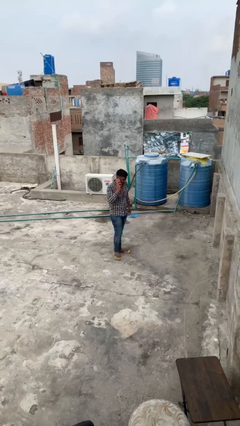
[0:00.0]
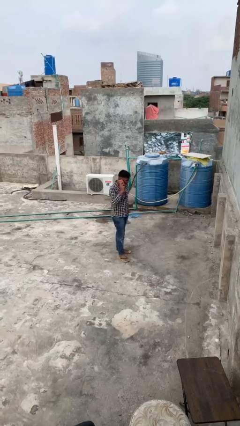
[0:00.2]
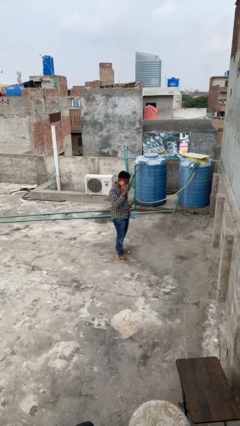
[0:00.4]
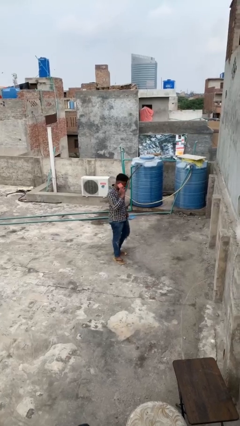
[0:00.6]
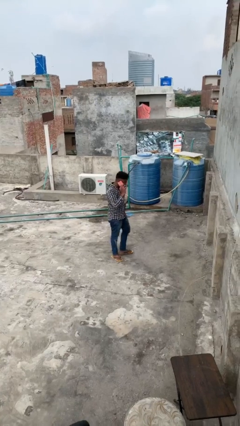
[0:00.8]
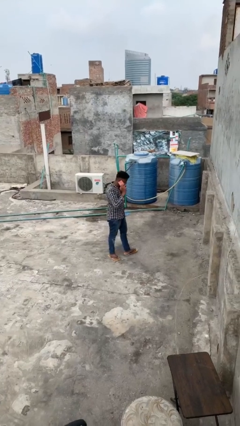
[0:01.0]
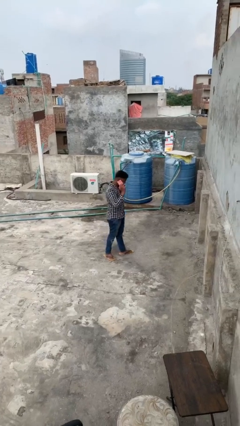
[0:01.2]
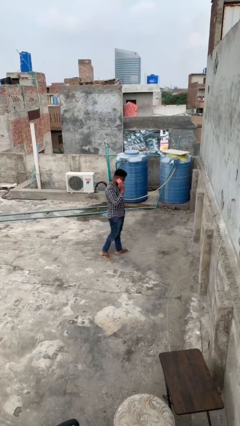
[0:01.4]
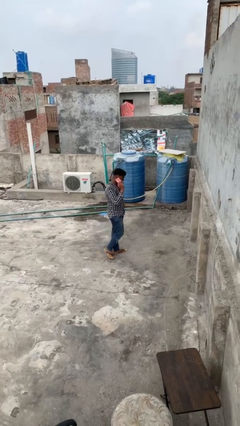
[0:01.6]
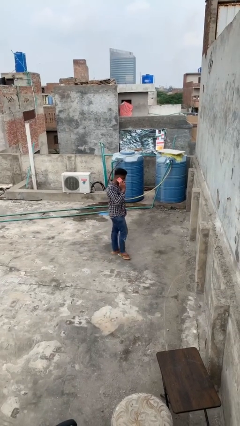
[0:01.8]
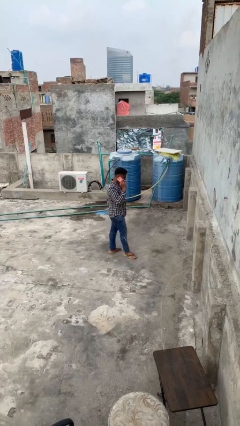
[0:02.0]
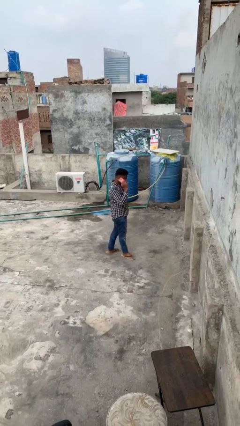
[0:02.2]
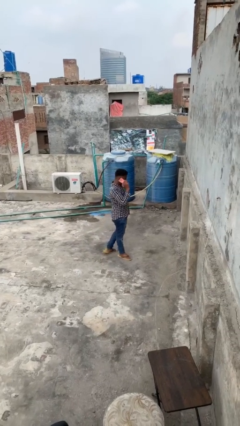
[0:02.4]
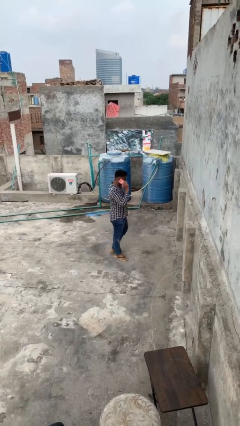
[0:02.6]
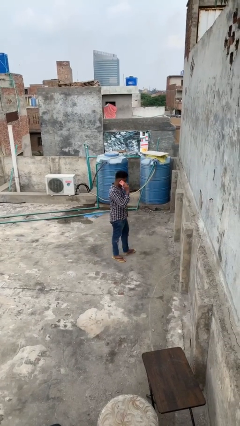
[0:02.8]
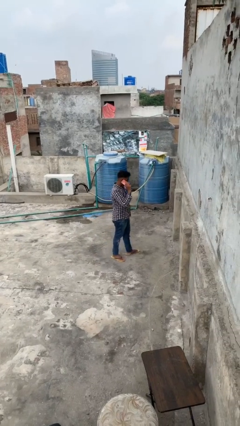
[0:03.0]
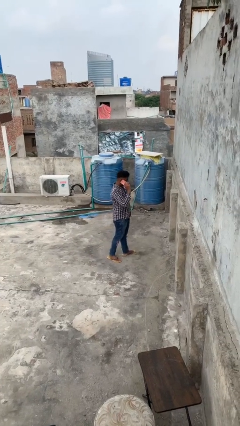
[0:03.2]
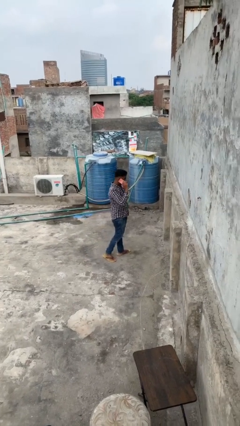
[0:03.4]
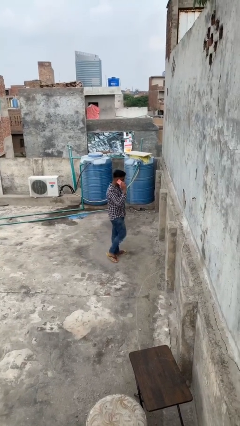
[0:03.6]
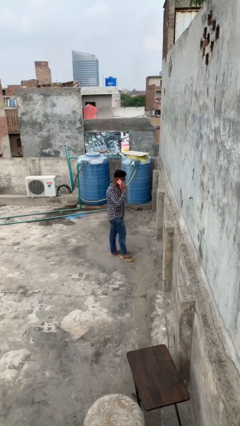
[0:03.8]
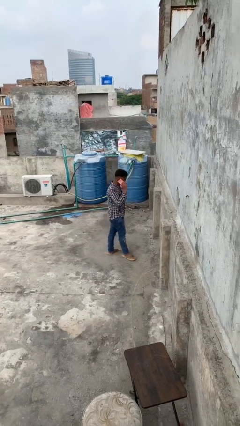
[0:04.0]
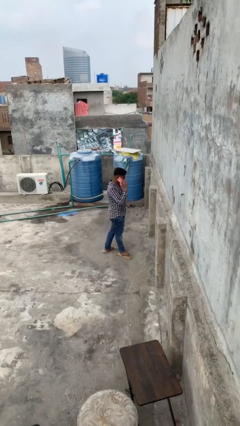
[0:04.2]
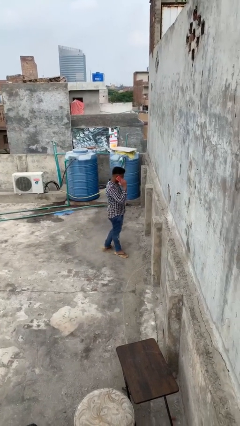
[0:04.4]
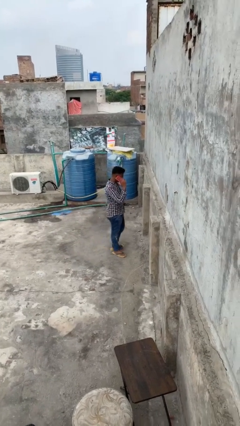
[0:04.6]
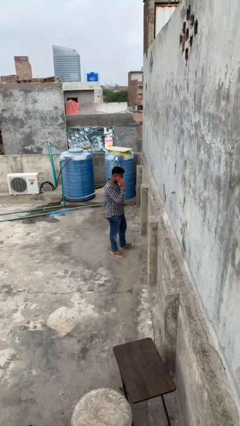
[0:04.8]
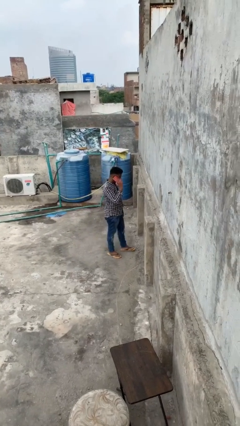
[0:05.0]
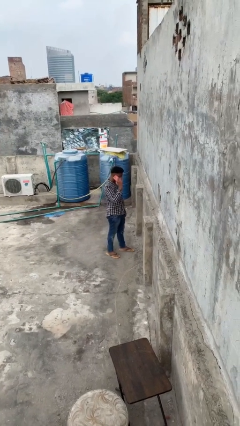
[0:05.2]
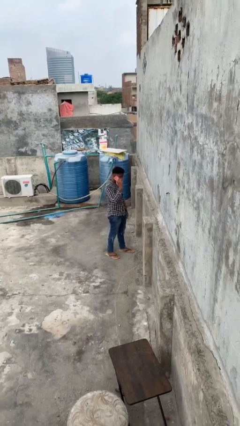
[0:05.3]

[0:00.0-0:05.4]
person talks on phone

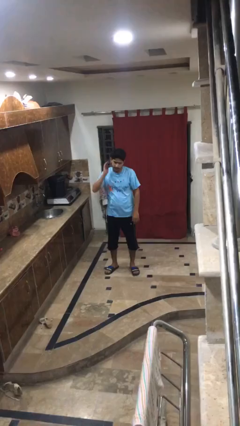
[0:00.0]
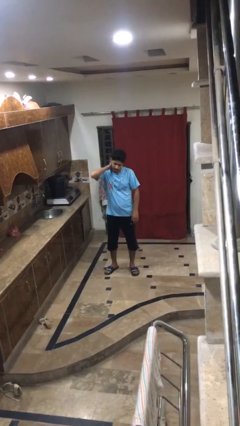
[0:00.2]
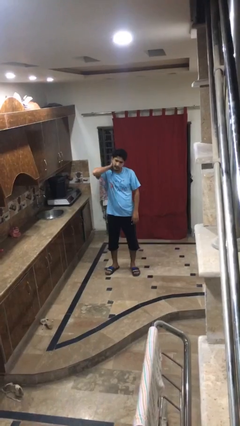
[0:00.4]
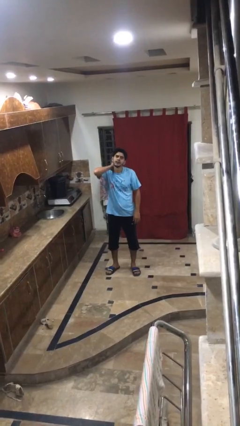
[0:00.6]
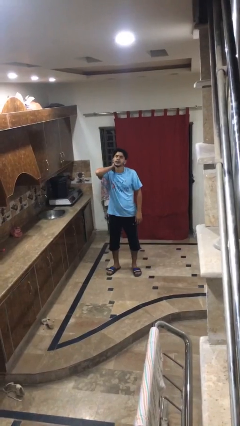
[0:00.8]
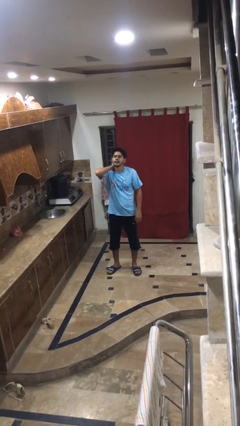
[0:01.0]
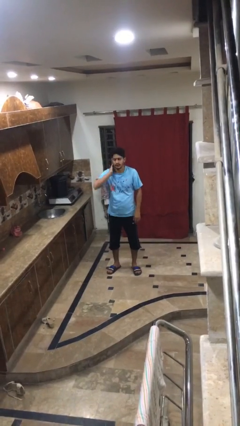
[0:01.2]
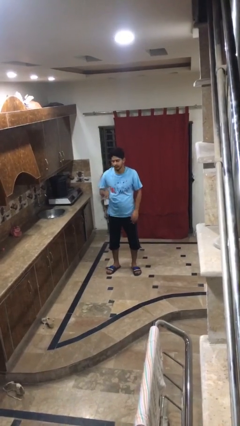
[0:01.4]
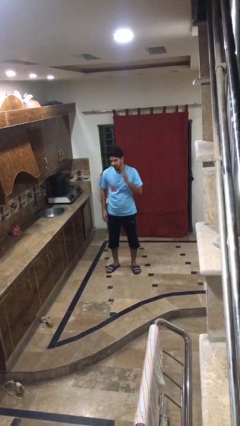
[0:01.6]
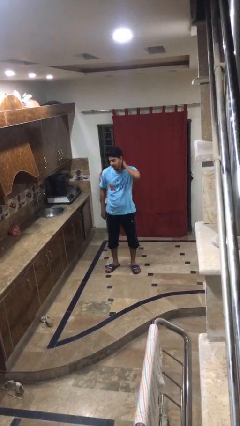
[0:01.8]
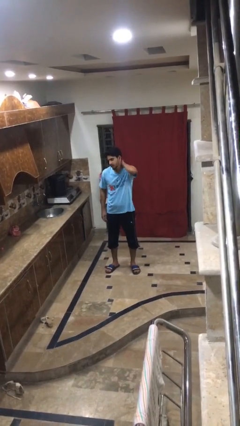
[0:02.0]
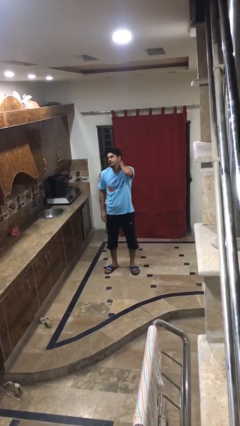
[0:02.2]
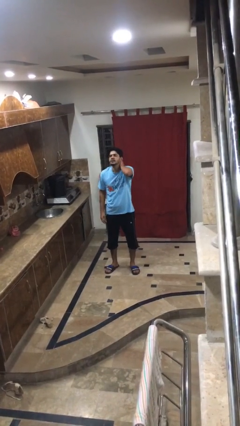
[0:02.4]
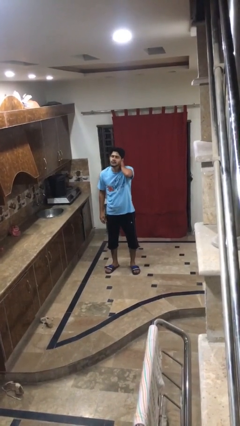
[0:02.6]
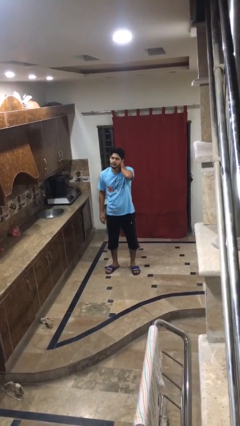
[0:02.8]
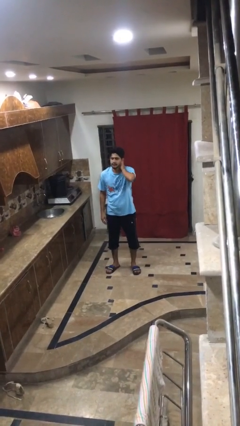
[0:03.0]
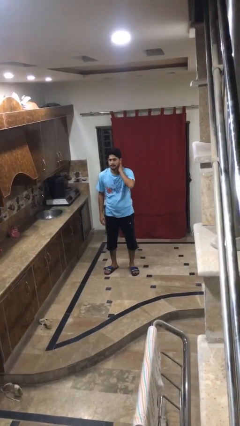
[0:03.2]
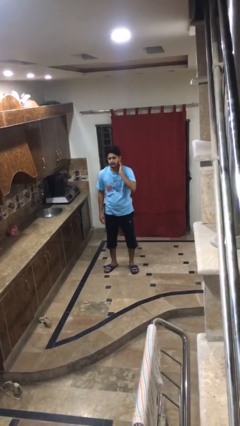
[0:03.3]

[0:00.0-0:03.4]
person rubs neck

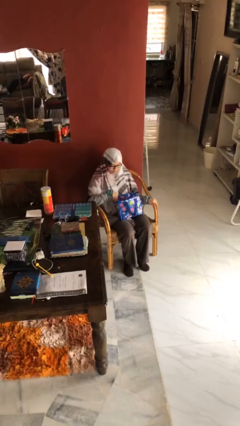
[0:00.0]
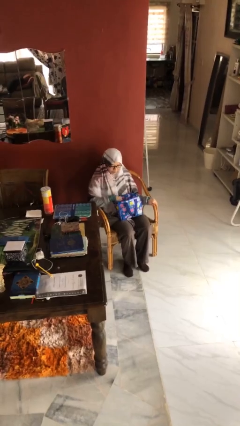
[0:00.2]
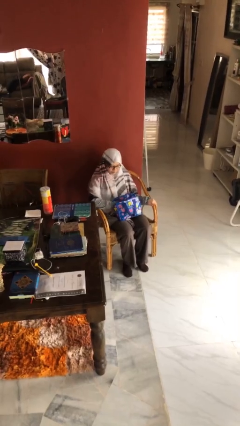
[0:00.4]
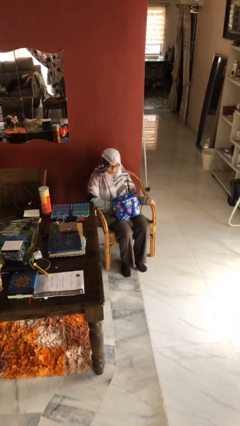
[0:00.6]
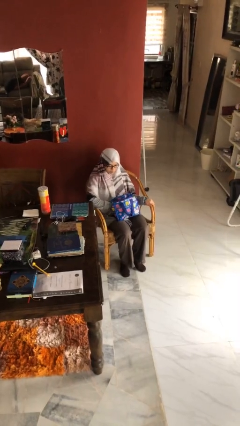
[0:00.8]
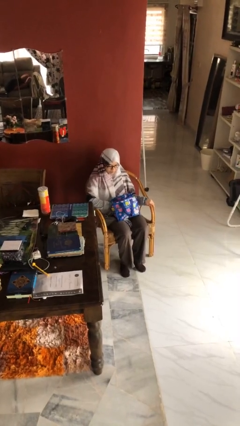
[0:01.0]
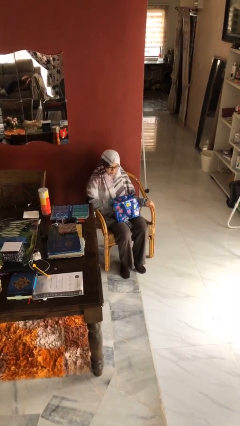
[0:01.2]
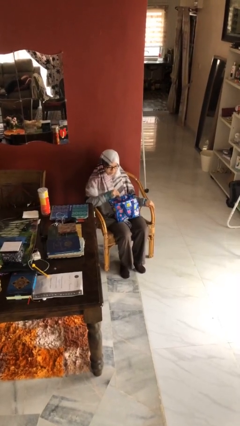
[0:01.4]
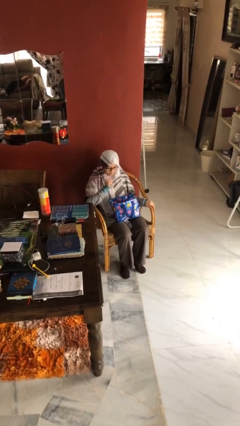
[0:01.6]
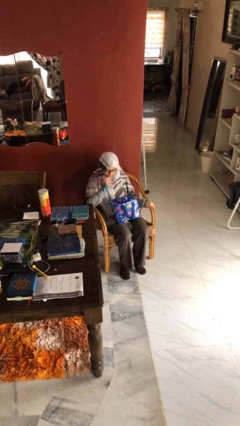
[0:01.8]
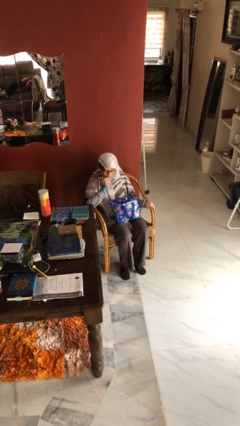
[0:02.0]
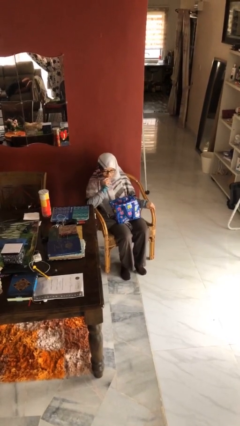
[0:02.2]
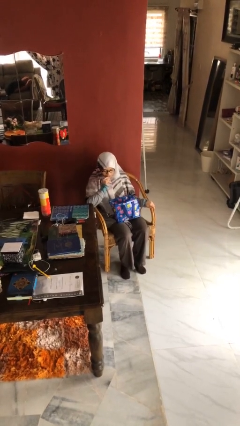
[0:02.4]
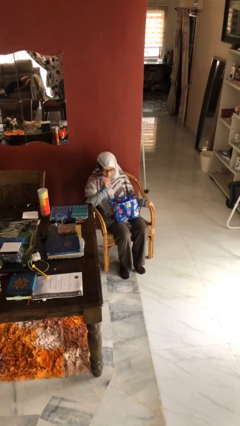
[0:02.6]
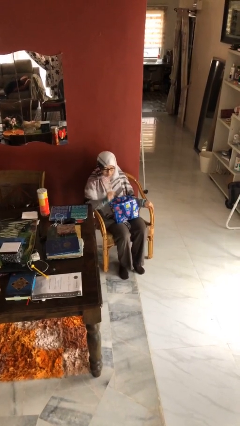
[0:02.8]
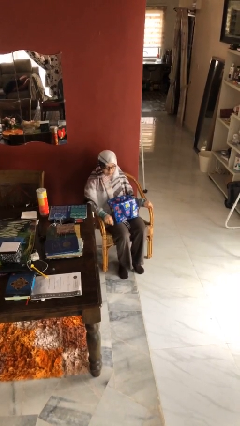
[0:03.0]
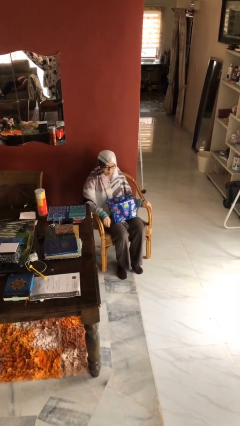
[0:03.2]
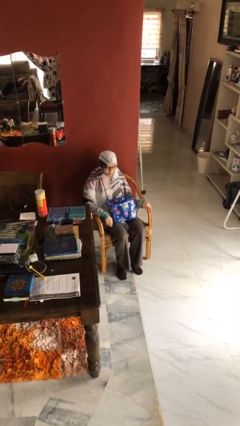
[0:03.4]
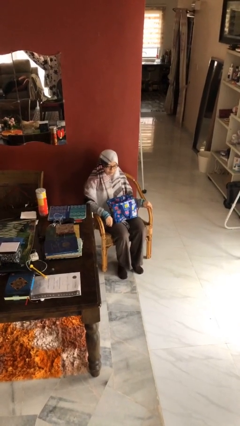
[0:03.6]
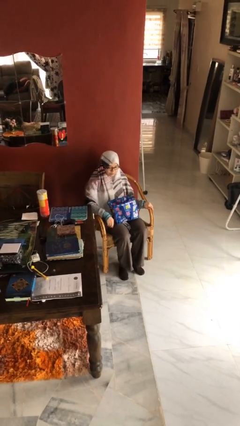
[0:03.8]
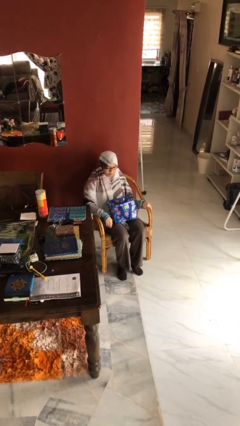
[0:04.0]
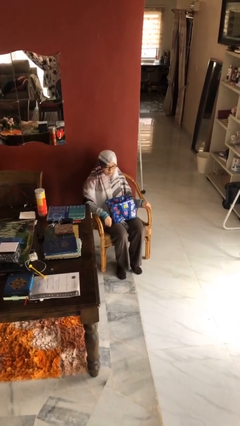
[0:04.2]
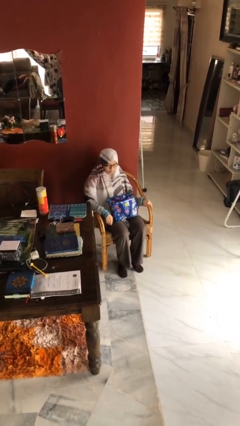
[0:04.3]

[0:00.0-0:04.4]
person eats snack from bag

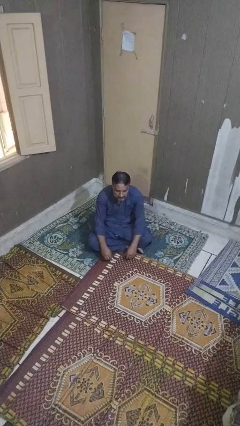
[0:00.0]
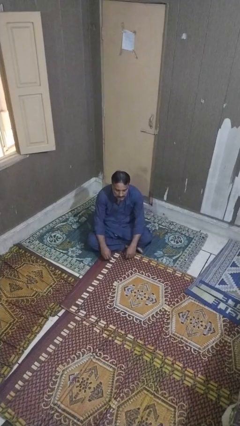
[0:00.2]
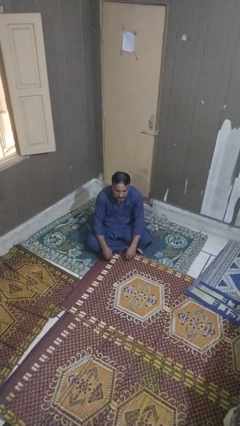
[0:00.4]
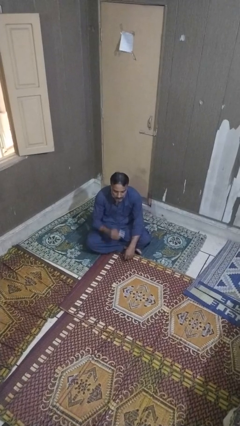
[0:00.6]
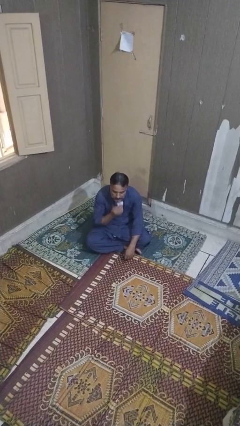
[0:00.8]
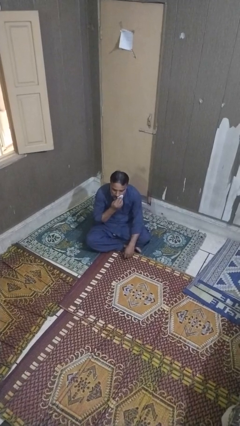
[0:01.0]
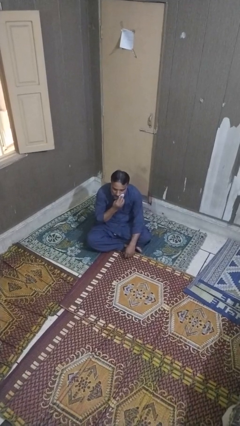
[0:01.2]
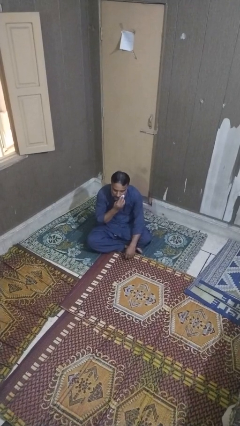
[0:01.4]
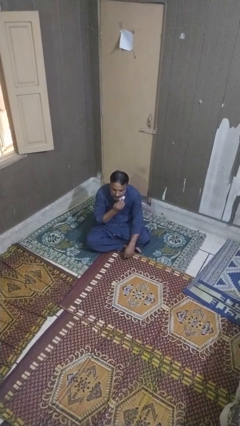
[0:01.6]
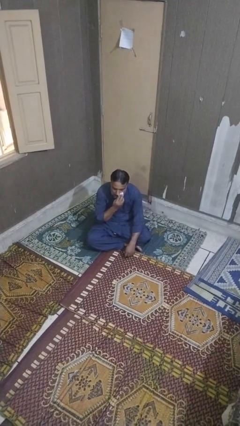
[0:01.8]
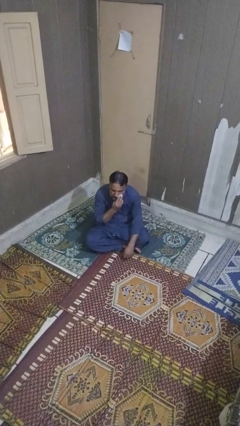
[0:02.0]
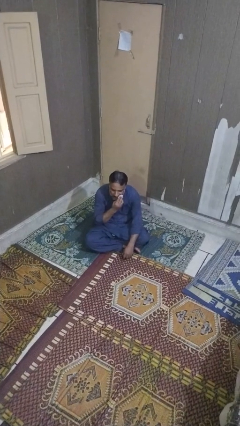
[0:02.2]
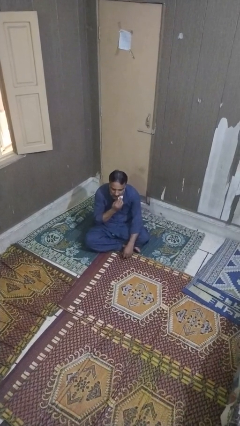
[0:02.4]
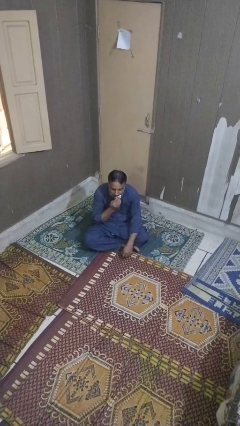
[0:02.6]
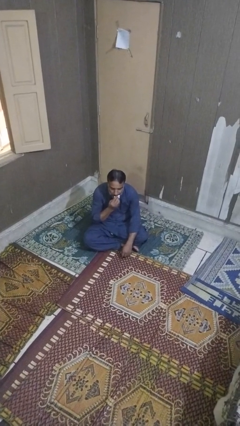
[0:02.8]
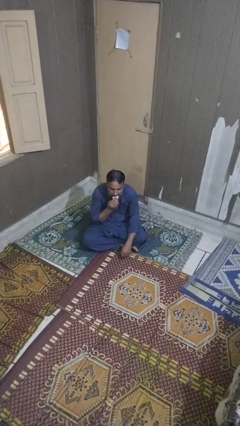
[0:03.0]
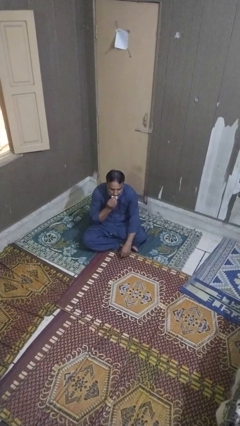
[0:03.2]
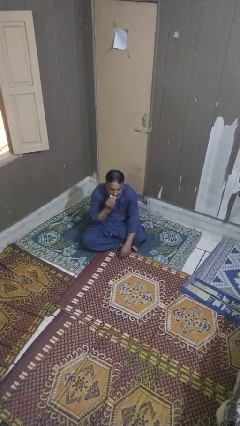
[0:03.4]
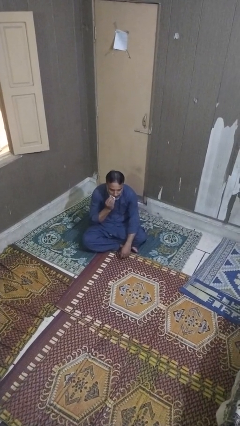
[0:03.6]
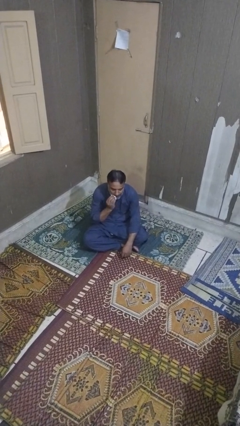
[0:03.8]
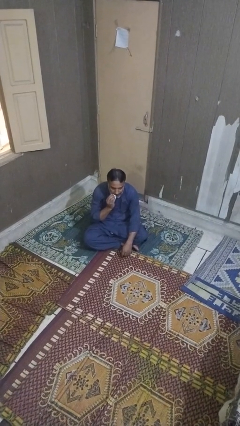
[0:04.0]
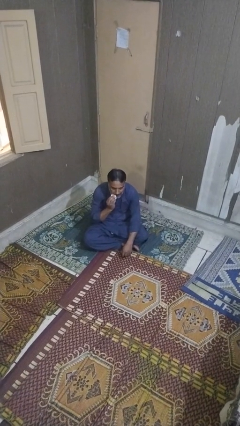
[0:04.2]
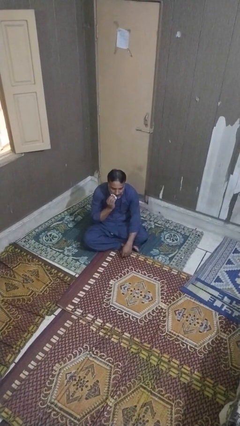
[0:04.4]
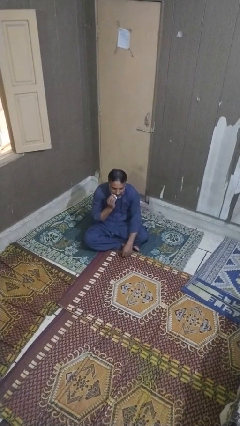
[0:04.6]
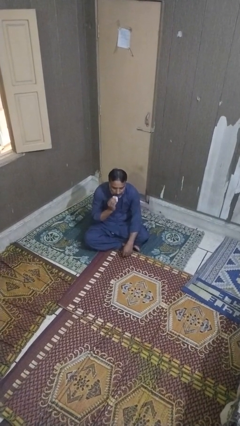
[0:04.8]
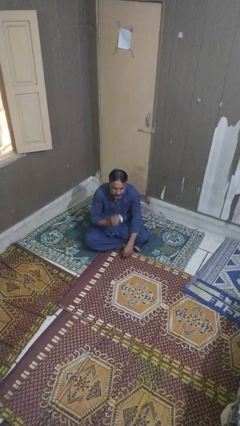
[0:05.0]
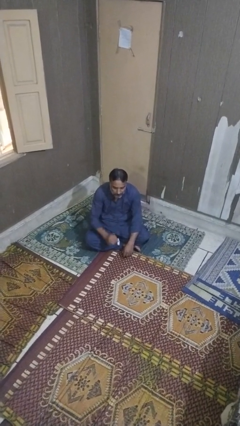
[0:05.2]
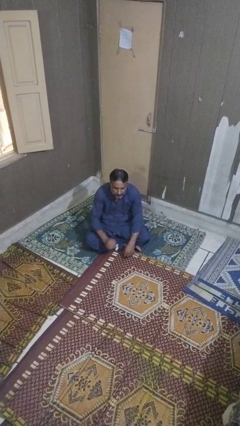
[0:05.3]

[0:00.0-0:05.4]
person wipes mouth with napkin
